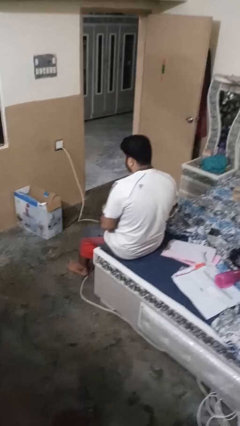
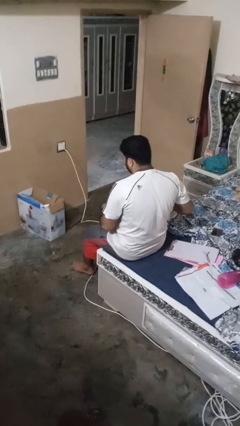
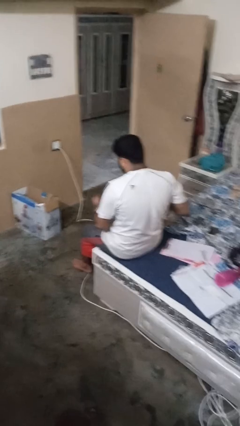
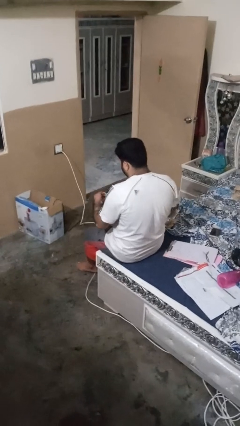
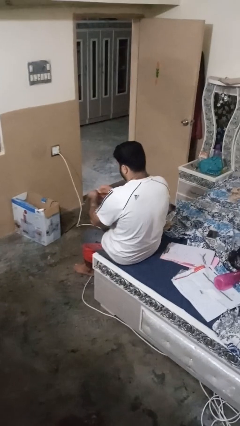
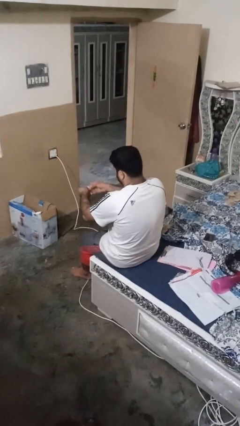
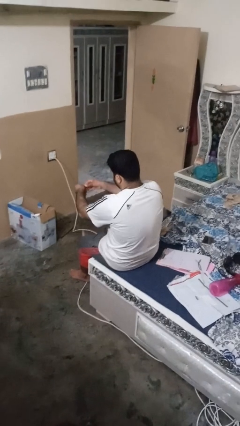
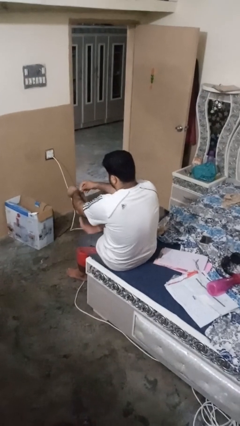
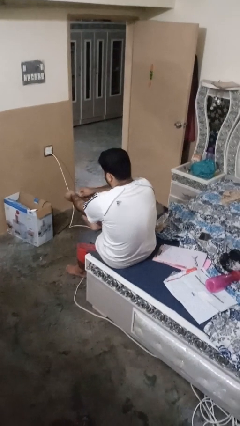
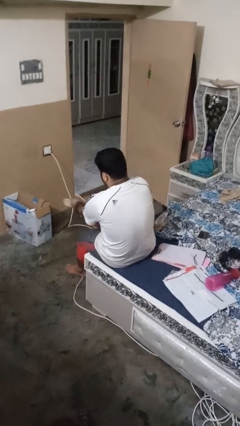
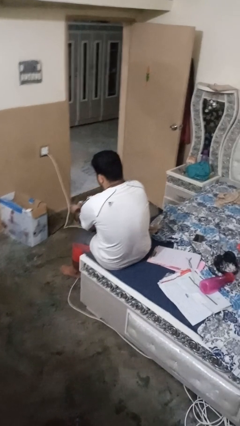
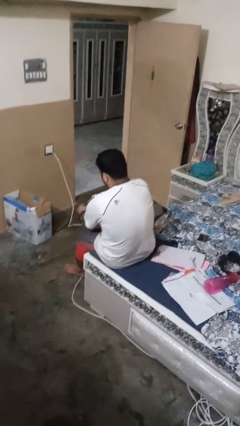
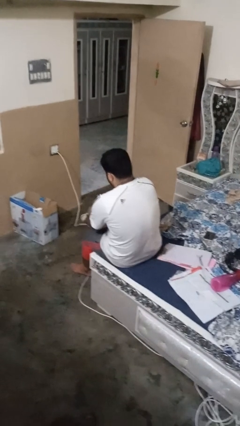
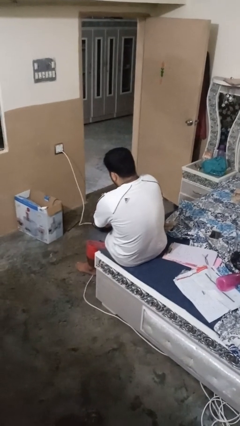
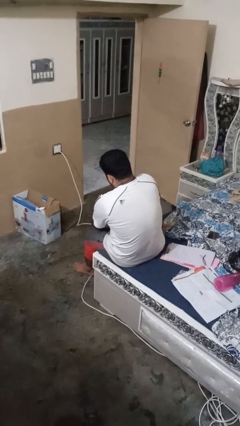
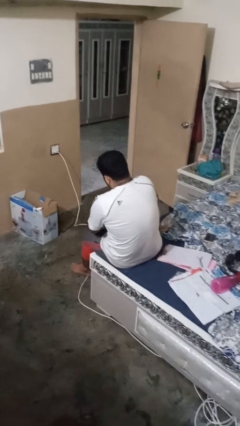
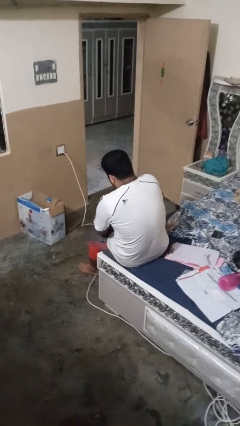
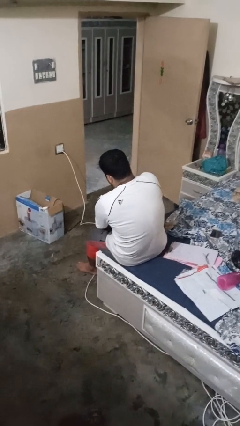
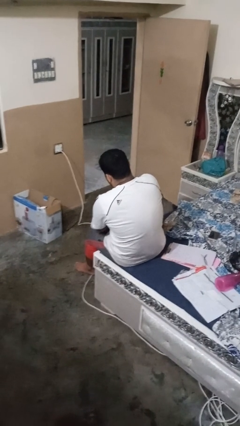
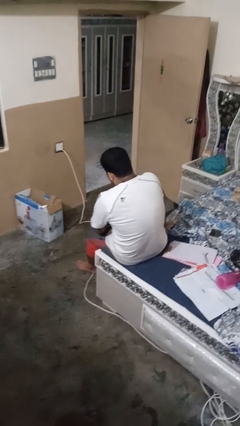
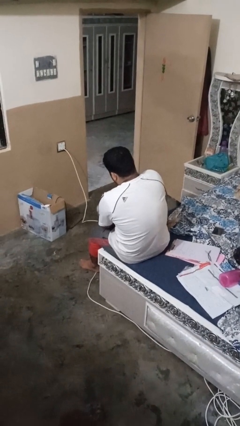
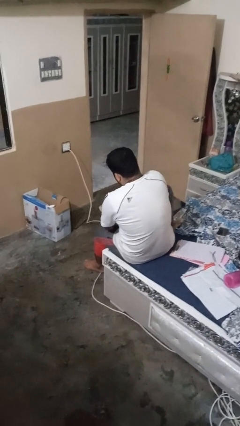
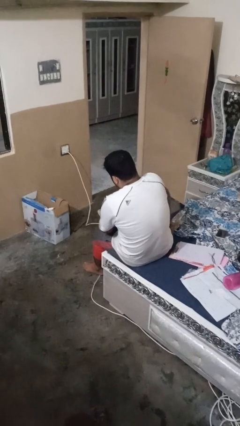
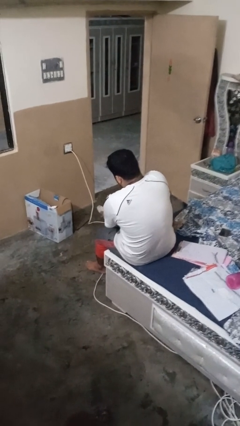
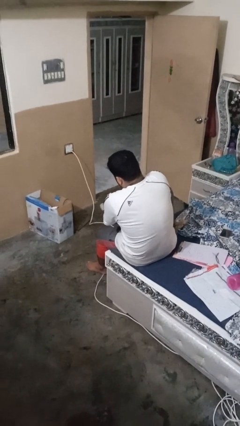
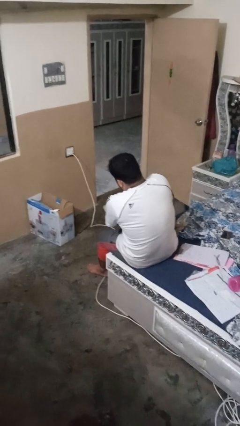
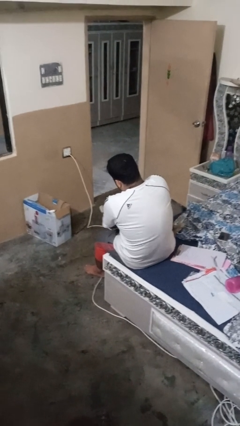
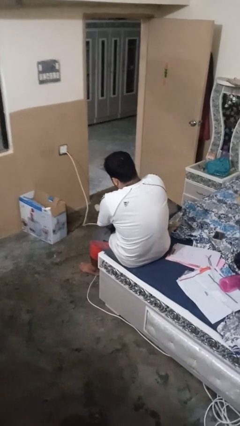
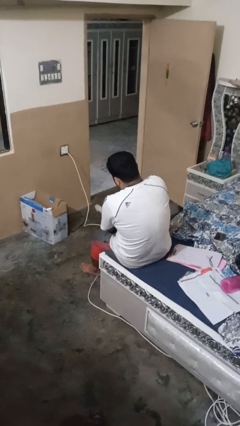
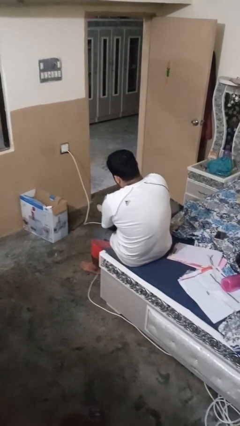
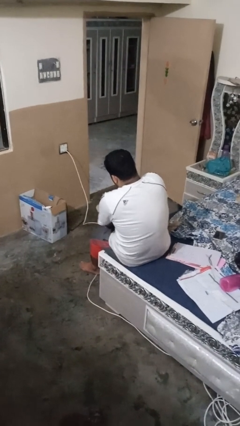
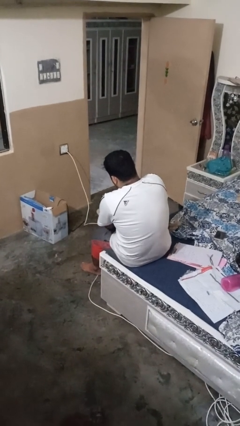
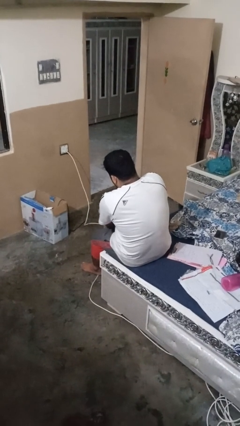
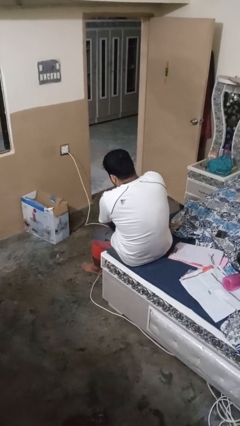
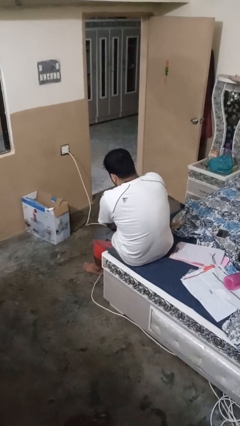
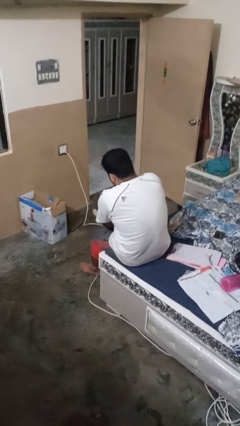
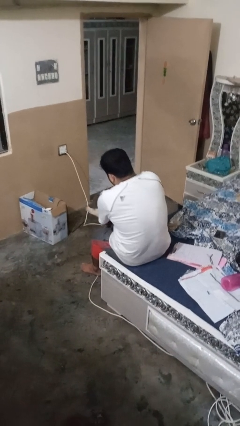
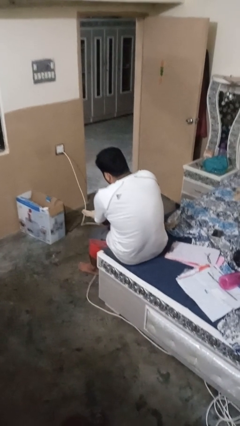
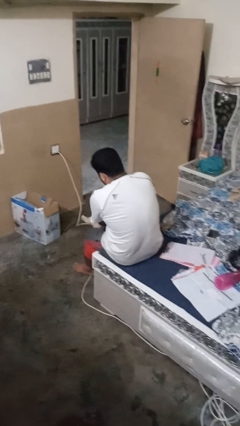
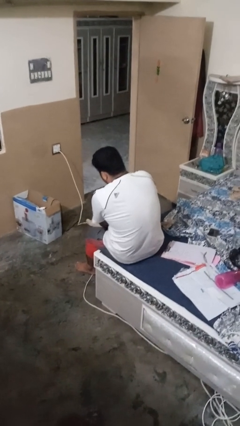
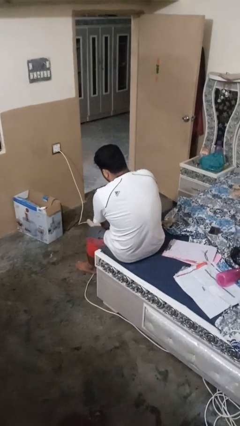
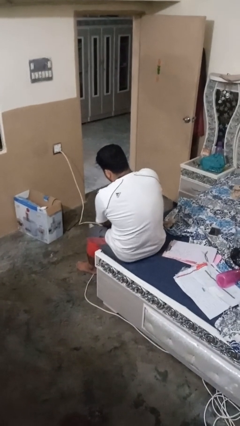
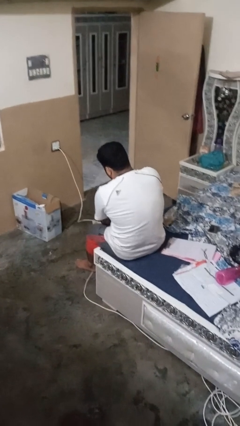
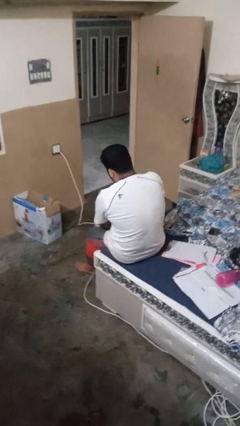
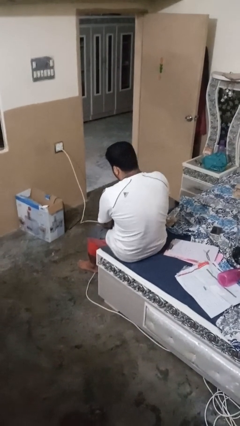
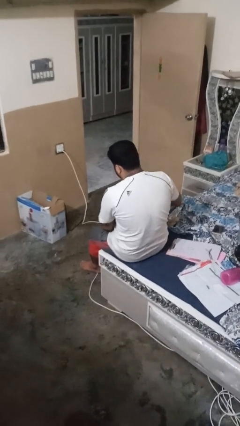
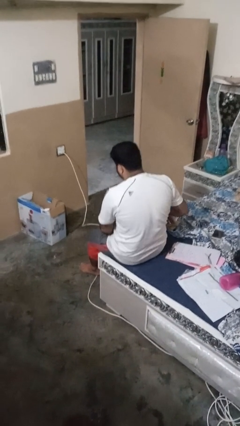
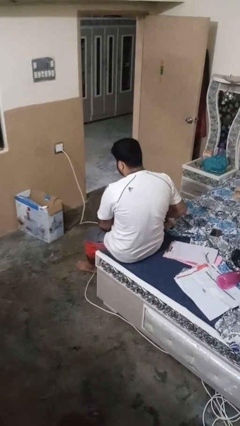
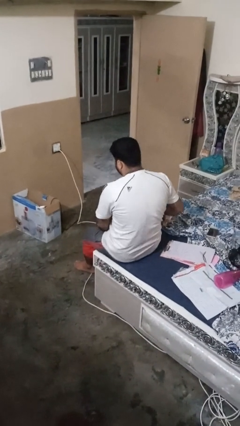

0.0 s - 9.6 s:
person puts on socks

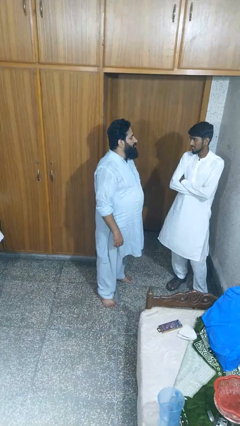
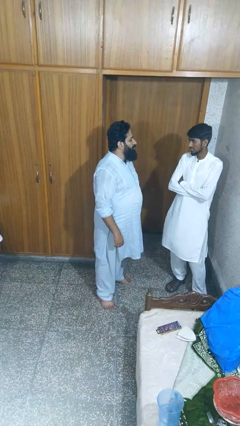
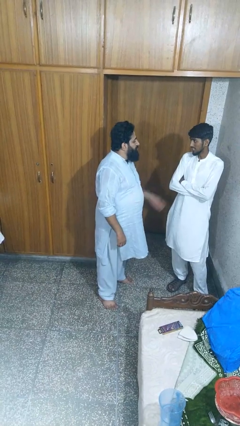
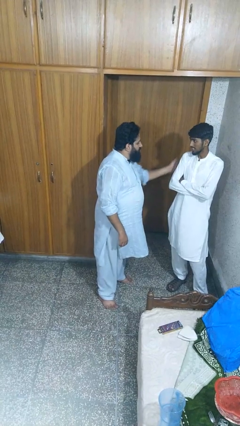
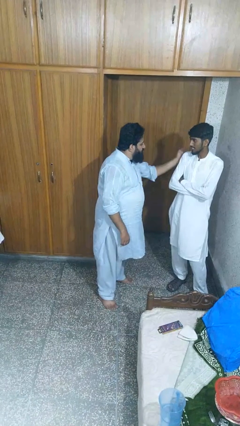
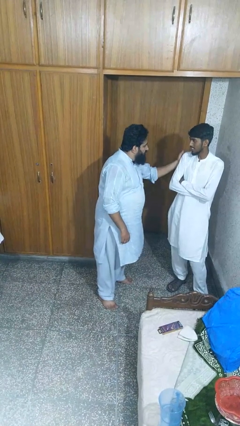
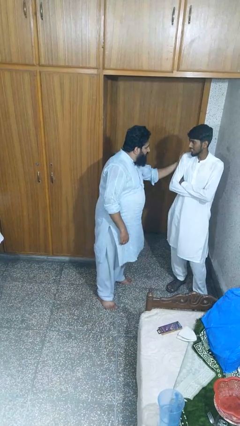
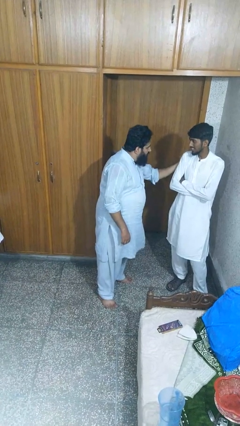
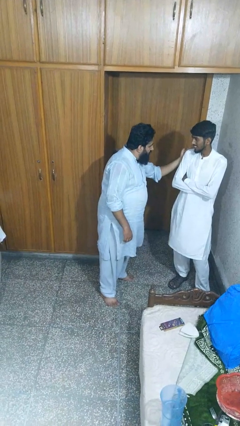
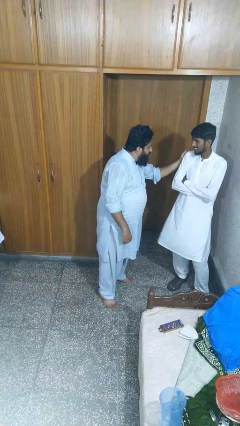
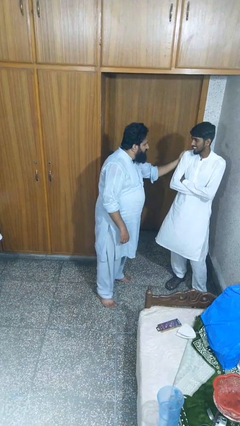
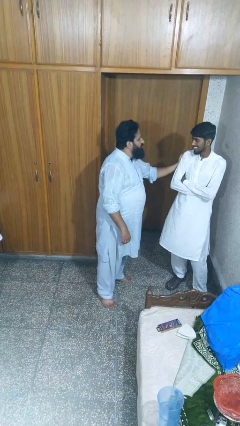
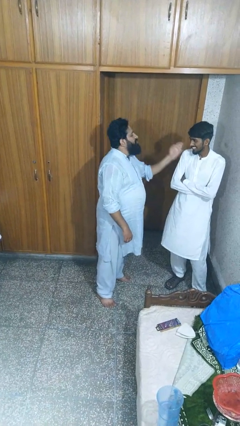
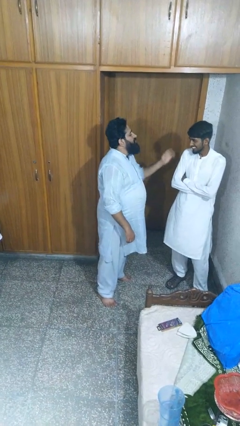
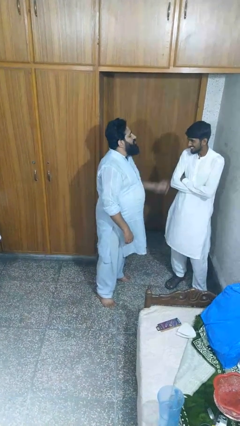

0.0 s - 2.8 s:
person pounds shoulders of person

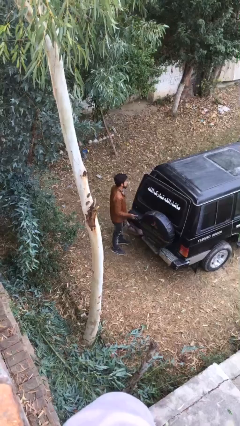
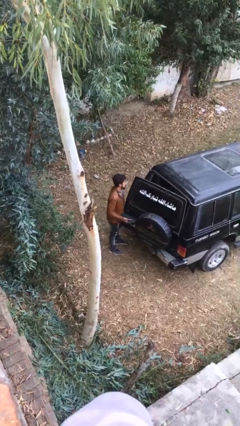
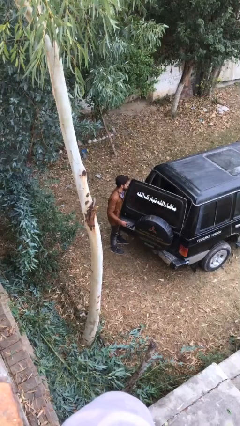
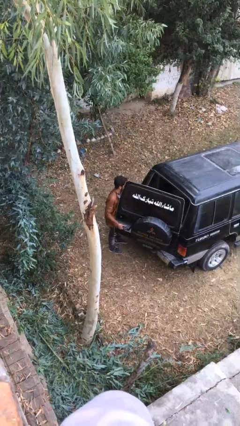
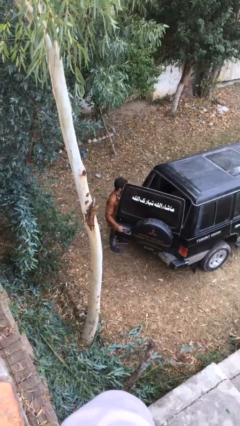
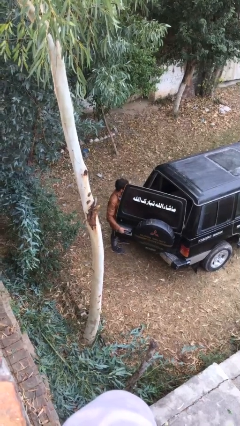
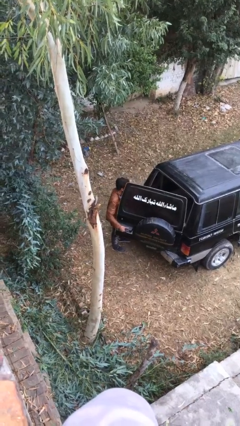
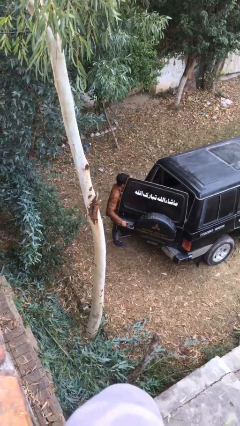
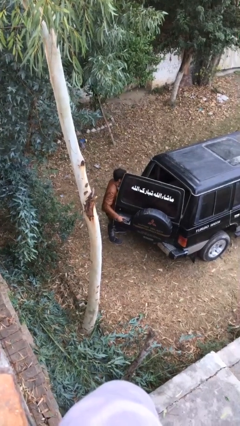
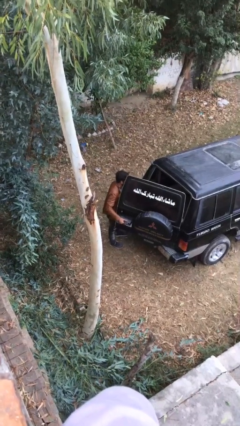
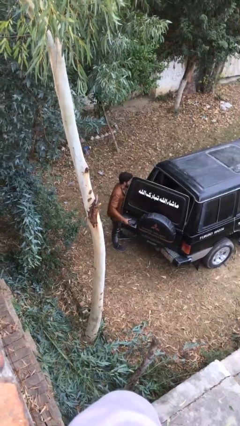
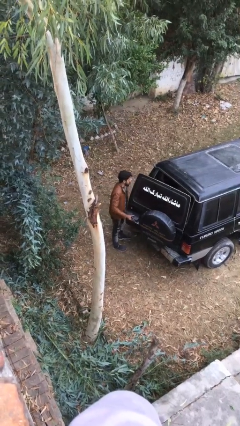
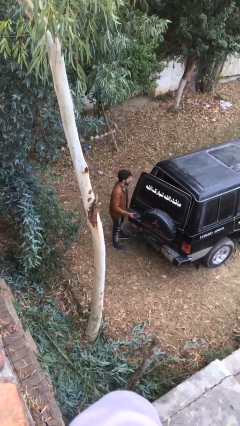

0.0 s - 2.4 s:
person opens car trunk

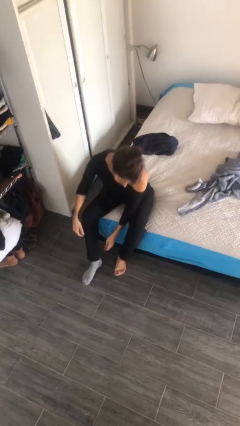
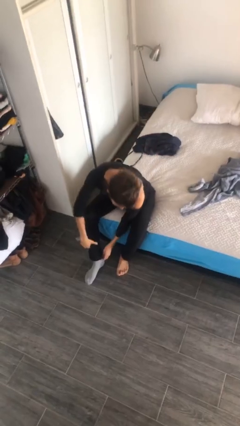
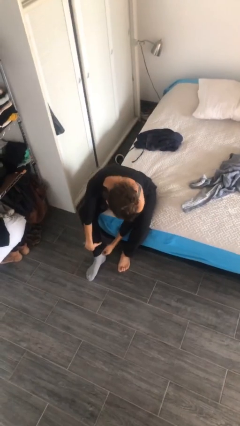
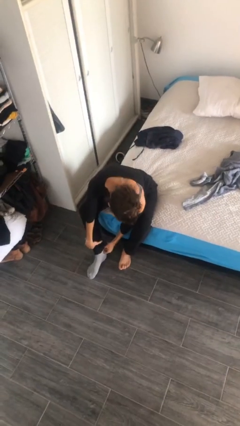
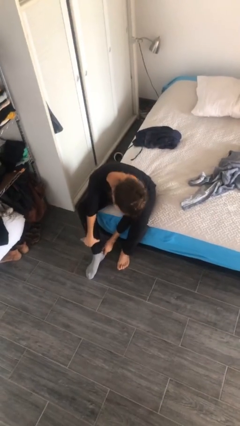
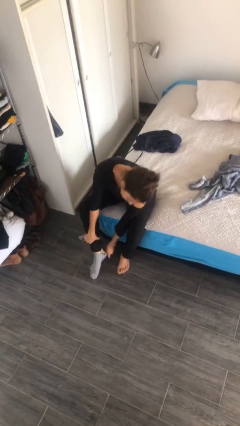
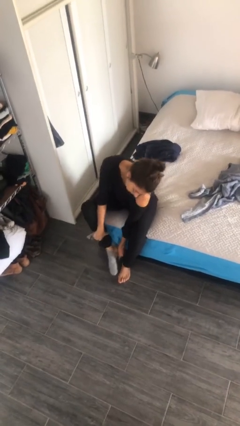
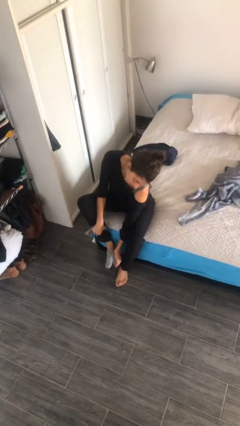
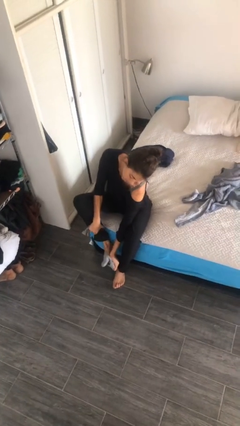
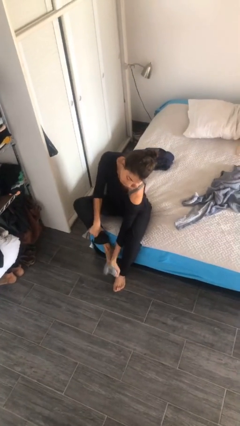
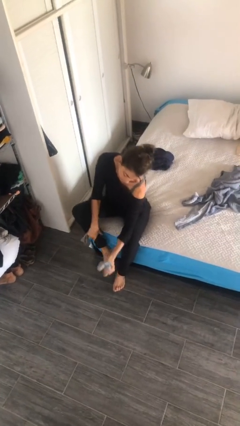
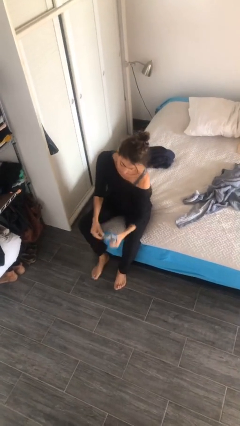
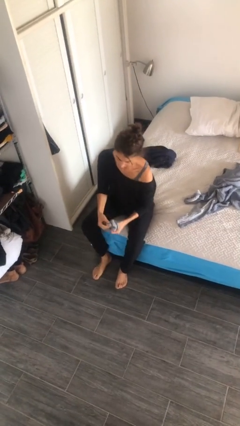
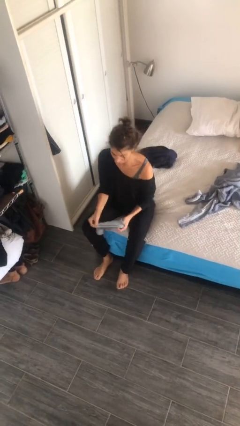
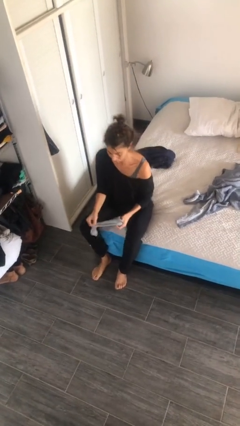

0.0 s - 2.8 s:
person takes off socks

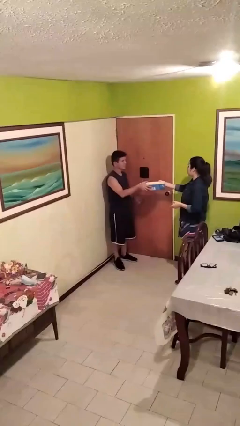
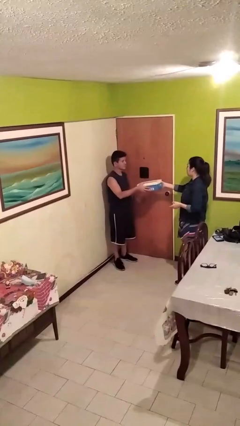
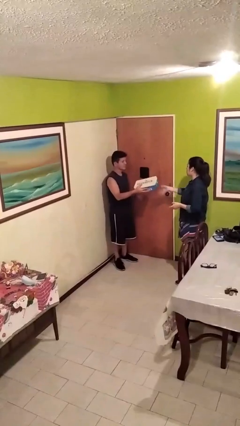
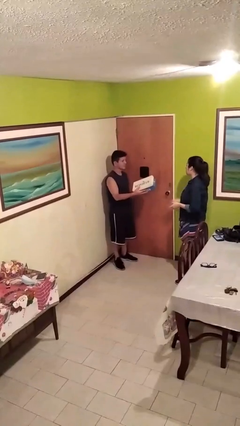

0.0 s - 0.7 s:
person transfers object to person
